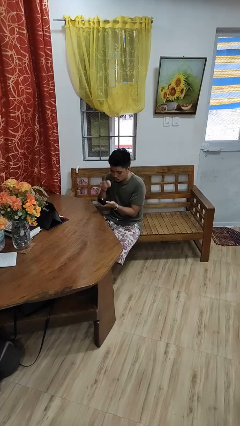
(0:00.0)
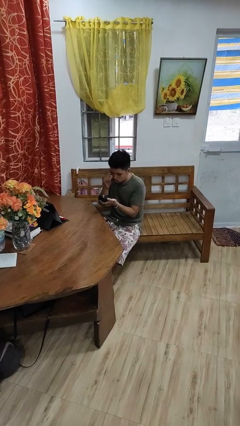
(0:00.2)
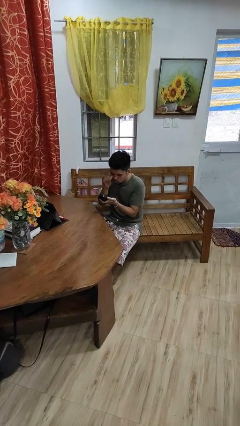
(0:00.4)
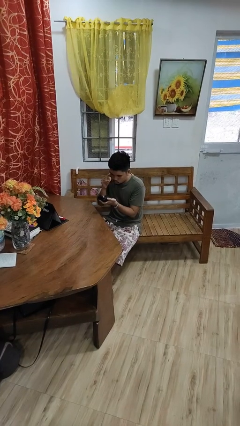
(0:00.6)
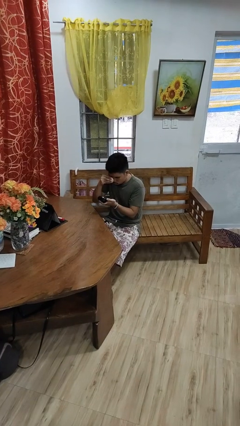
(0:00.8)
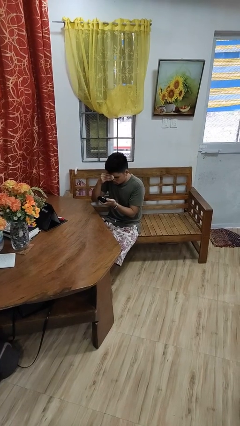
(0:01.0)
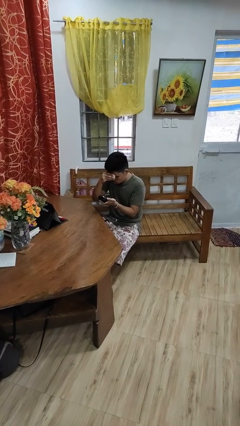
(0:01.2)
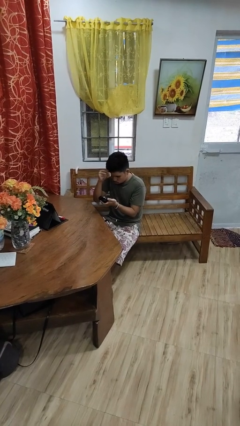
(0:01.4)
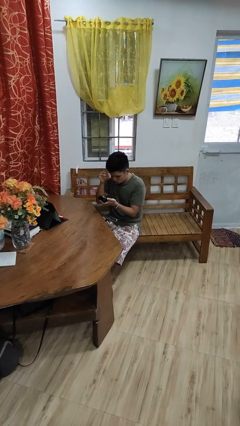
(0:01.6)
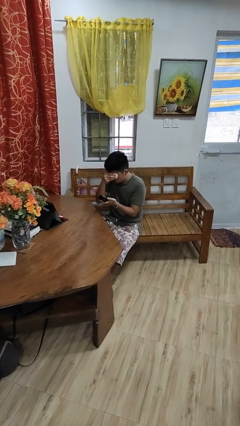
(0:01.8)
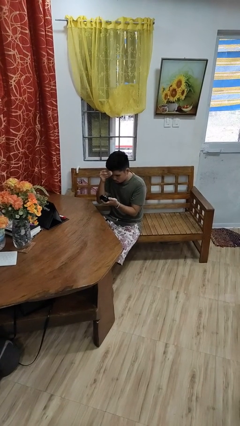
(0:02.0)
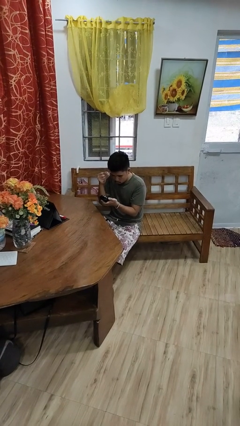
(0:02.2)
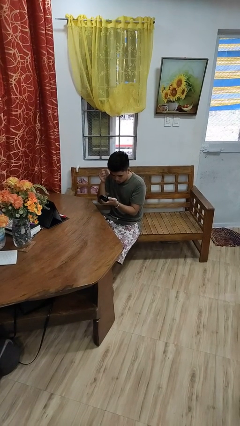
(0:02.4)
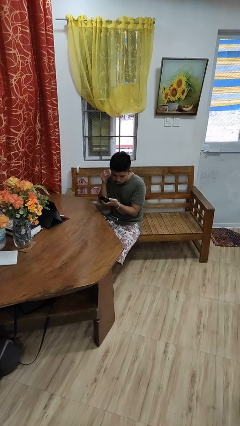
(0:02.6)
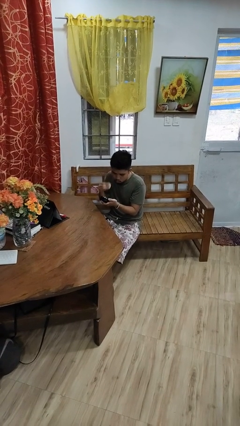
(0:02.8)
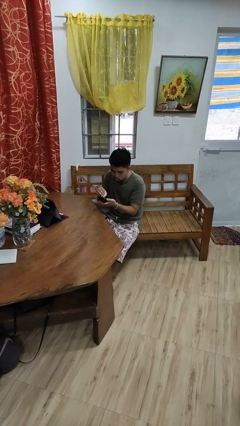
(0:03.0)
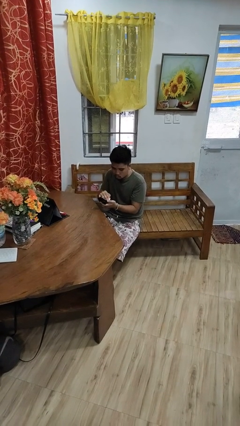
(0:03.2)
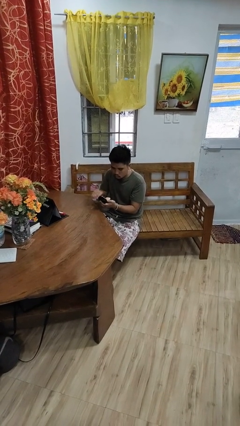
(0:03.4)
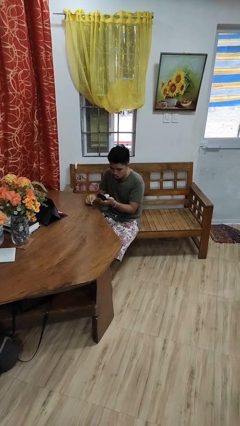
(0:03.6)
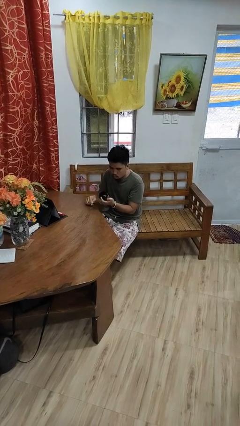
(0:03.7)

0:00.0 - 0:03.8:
person applies foundation makeup

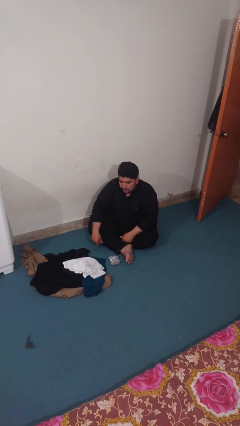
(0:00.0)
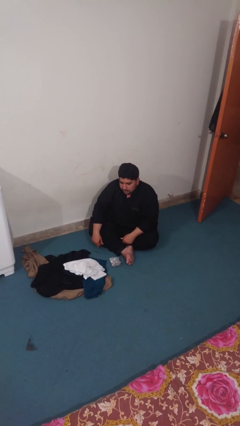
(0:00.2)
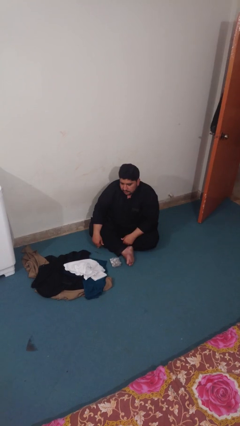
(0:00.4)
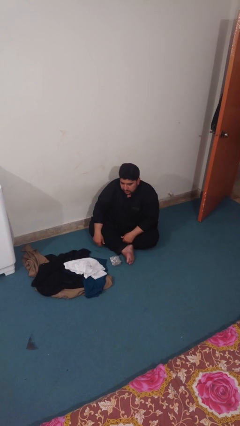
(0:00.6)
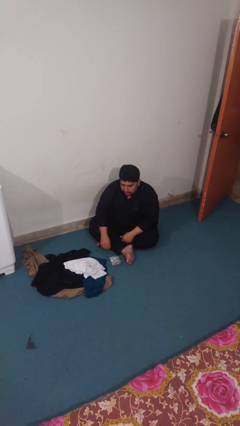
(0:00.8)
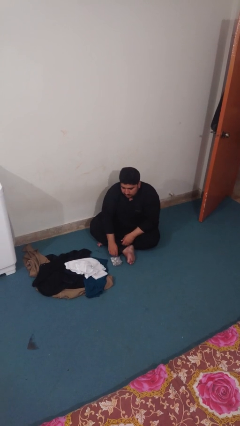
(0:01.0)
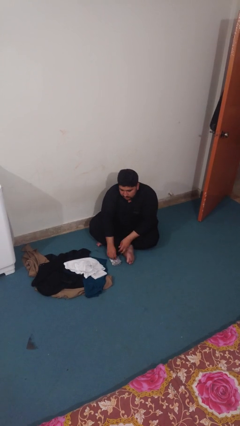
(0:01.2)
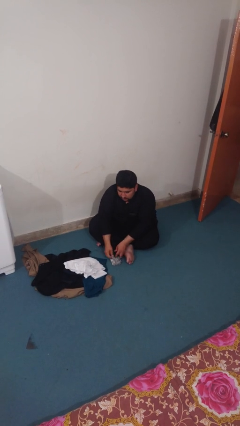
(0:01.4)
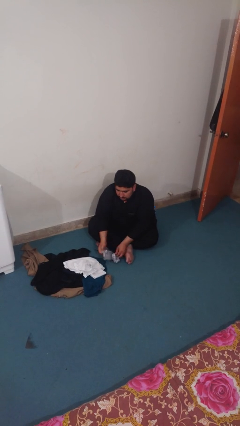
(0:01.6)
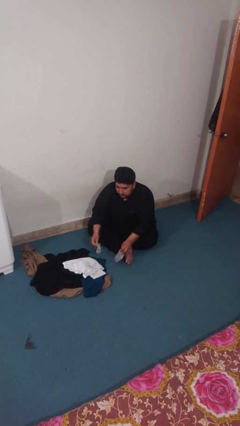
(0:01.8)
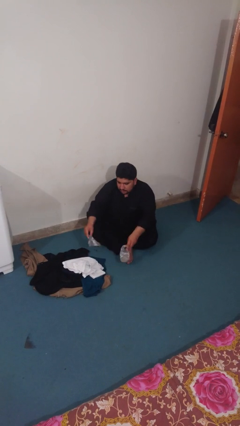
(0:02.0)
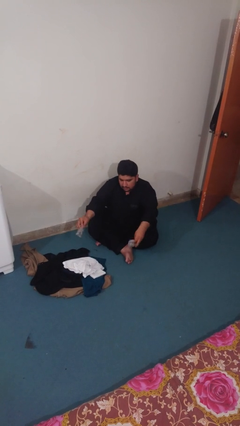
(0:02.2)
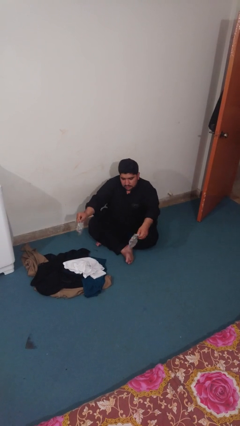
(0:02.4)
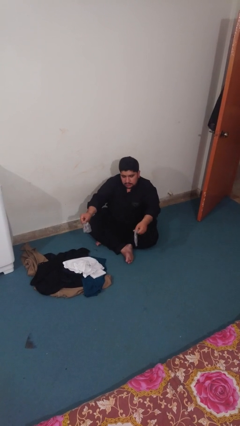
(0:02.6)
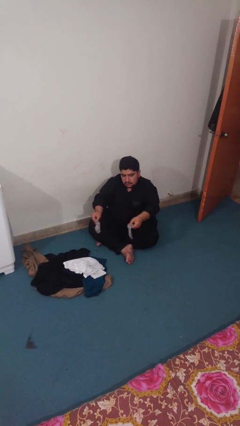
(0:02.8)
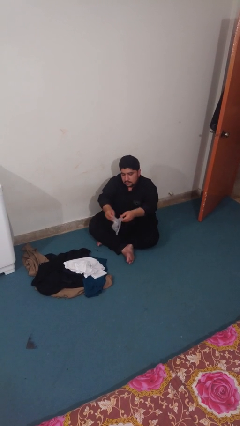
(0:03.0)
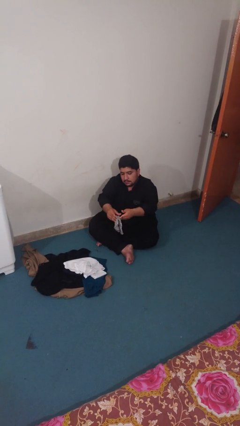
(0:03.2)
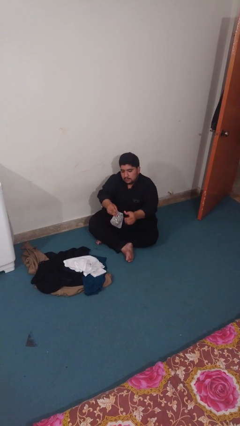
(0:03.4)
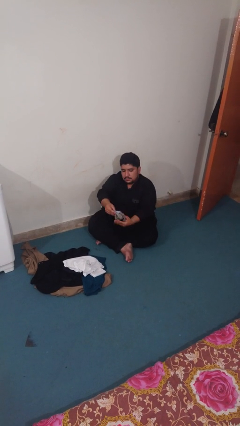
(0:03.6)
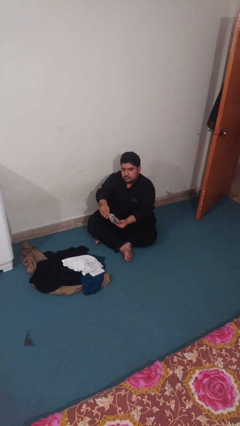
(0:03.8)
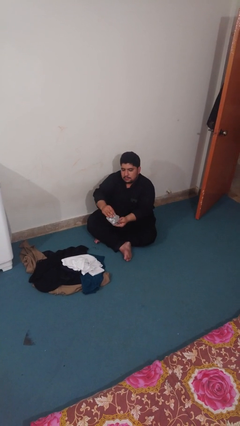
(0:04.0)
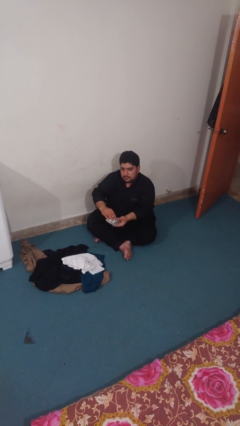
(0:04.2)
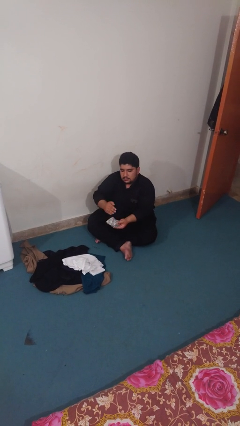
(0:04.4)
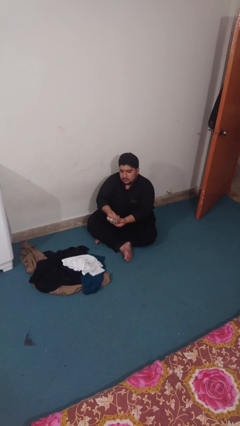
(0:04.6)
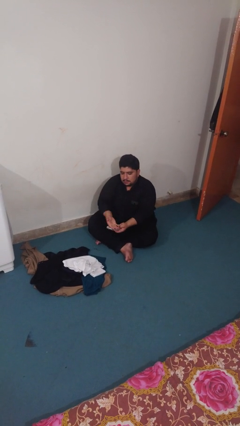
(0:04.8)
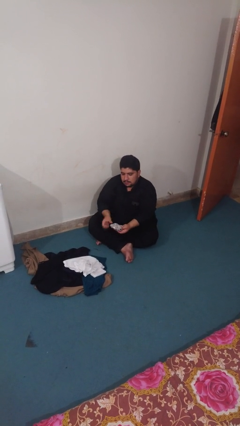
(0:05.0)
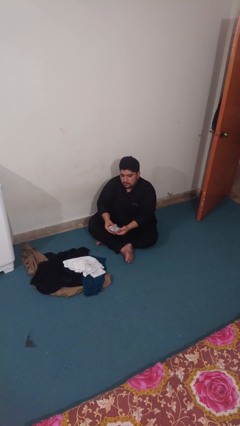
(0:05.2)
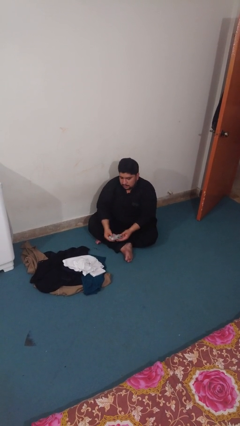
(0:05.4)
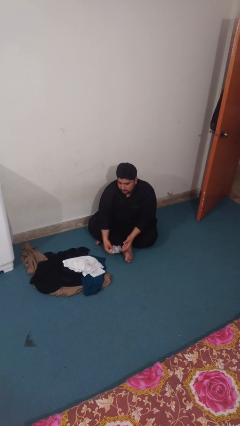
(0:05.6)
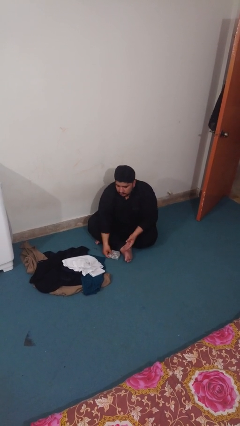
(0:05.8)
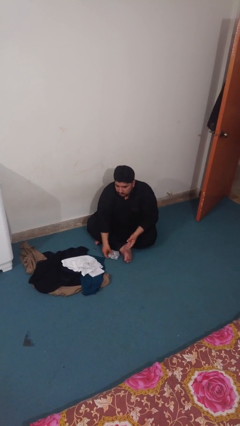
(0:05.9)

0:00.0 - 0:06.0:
person folds socks

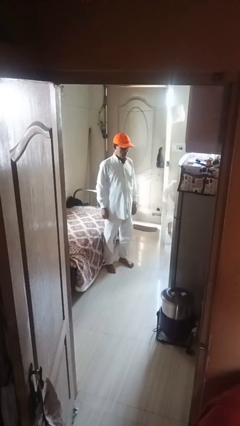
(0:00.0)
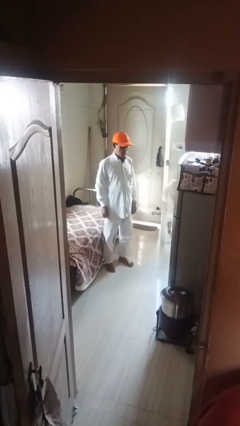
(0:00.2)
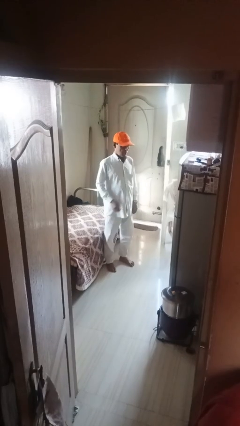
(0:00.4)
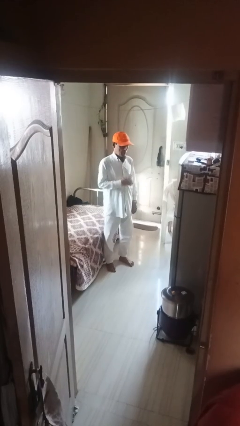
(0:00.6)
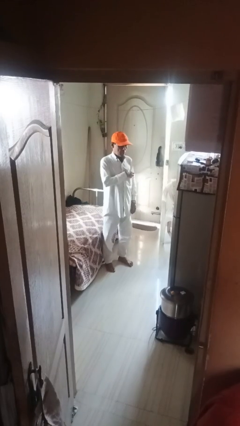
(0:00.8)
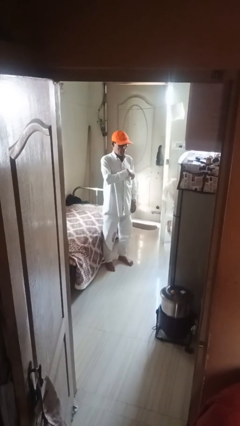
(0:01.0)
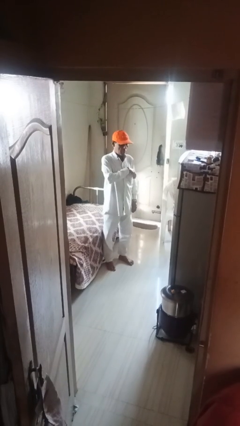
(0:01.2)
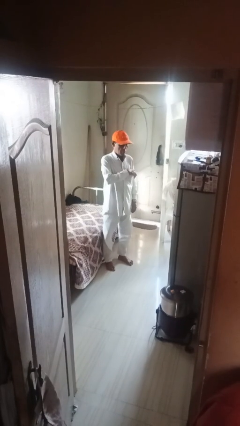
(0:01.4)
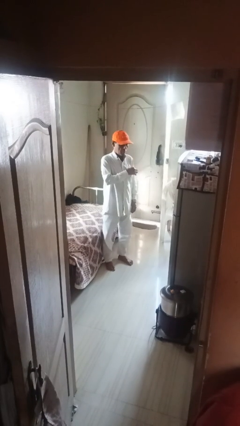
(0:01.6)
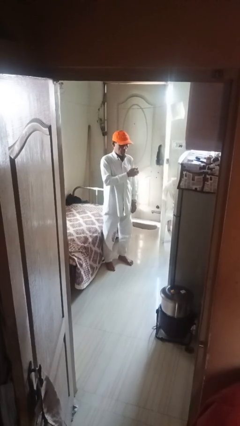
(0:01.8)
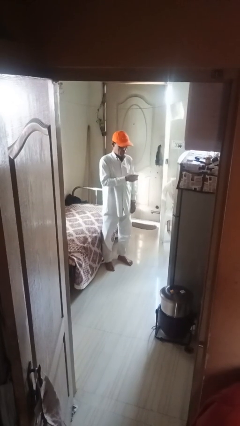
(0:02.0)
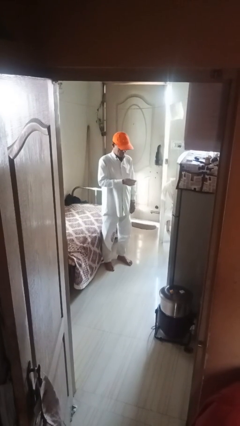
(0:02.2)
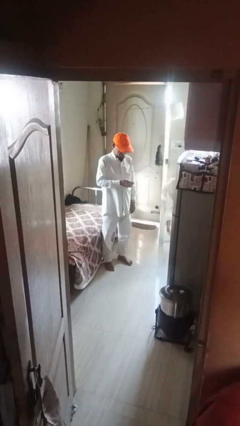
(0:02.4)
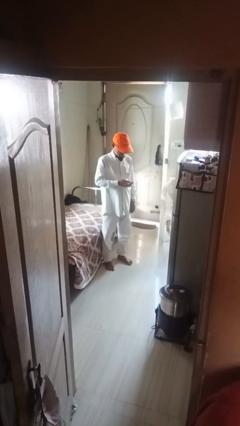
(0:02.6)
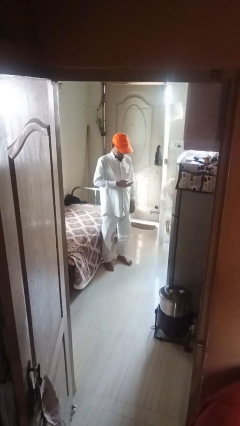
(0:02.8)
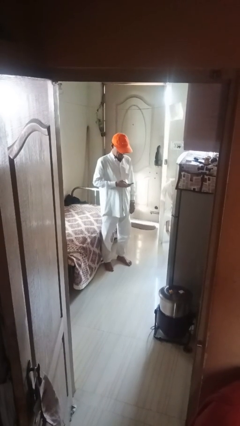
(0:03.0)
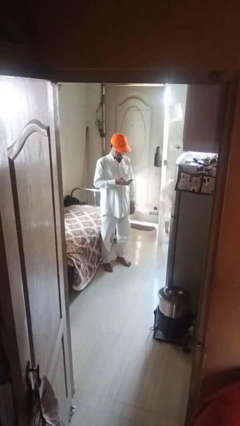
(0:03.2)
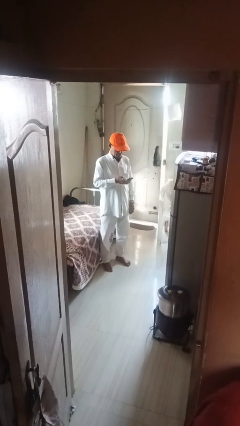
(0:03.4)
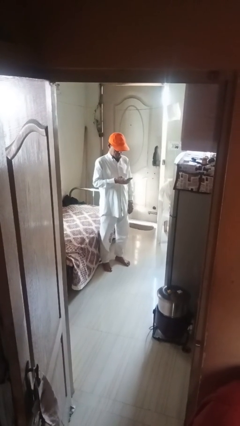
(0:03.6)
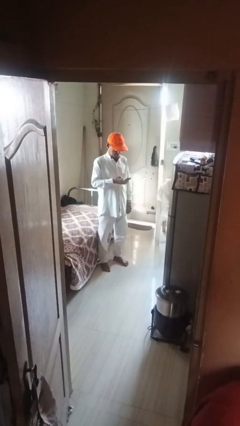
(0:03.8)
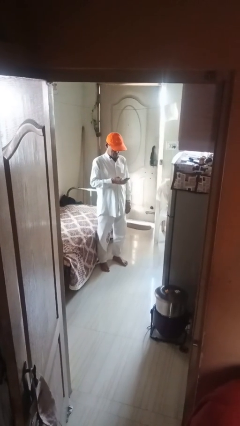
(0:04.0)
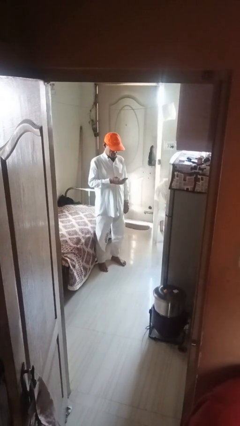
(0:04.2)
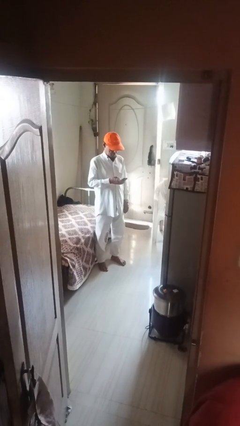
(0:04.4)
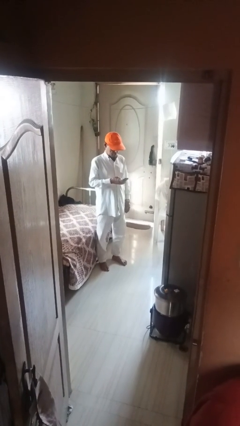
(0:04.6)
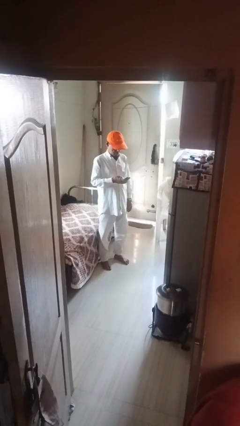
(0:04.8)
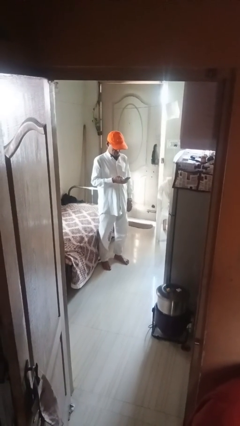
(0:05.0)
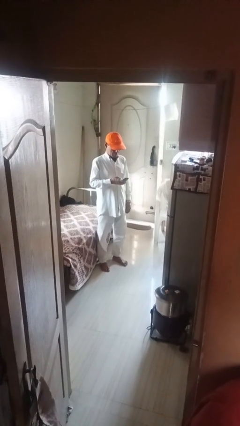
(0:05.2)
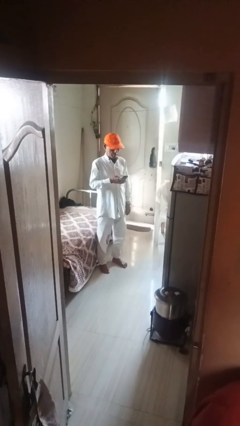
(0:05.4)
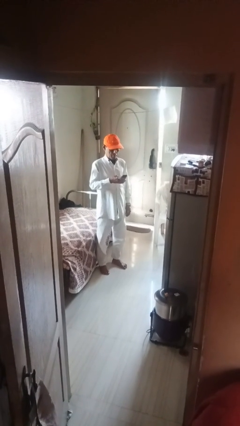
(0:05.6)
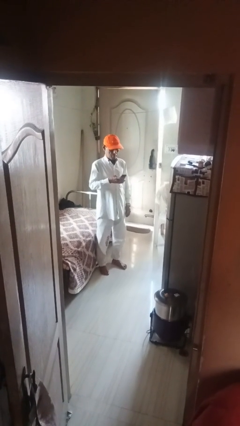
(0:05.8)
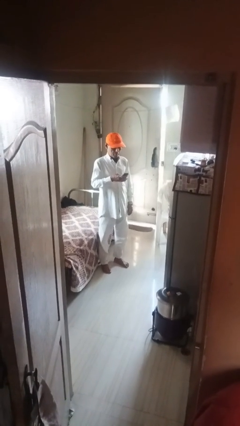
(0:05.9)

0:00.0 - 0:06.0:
person takes phone from pocket

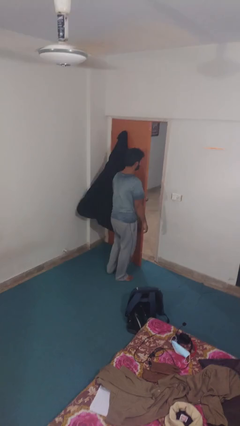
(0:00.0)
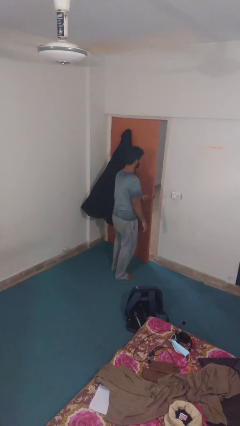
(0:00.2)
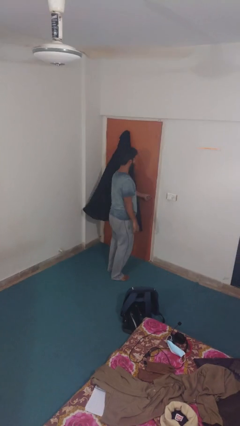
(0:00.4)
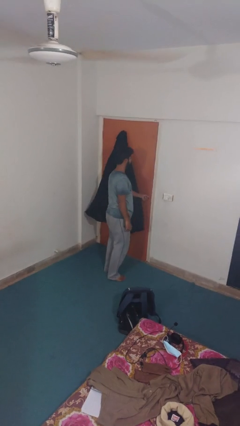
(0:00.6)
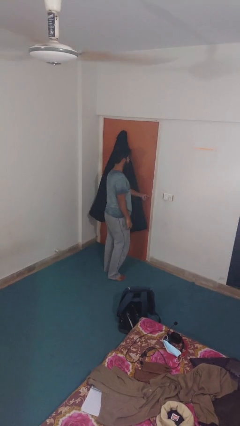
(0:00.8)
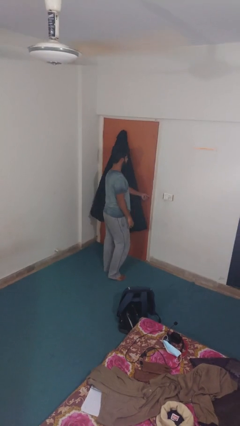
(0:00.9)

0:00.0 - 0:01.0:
person closes facility door

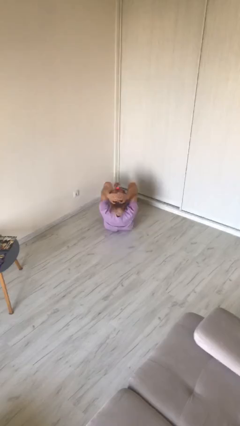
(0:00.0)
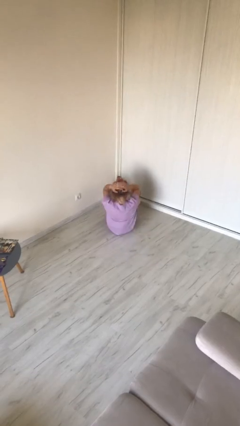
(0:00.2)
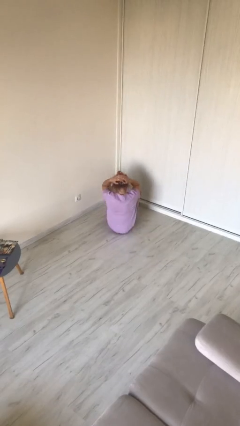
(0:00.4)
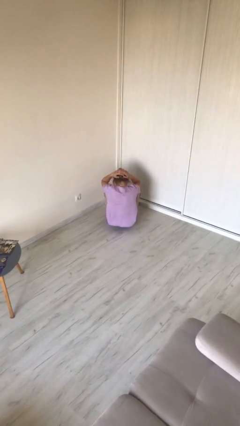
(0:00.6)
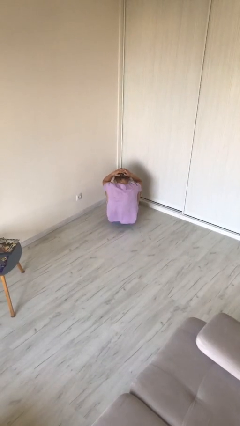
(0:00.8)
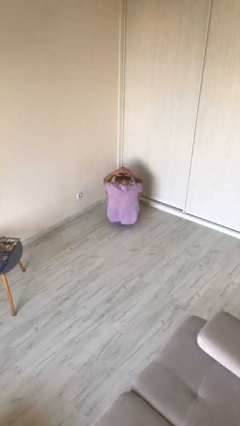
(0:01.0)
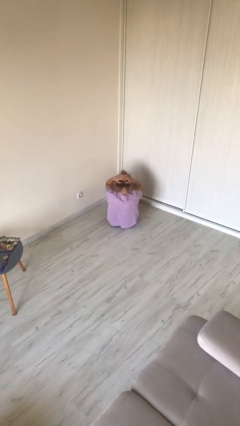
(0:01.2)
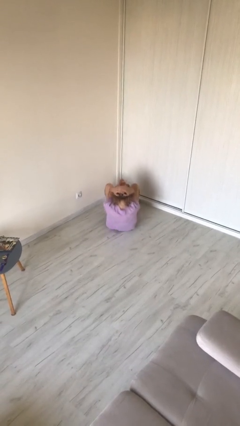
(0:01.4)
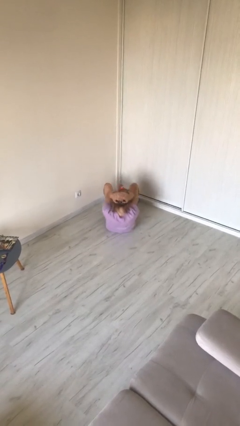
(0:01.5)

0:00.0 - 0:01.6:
person exercises with situp
